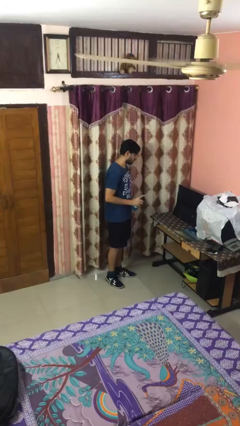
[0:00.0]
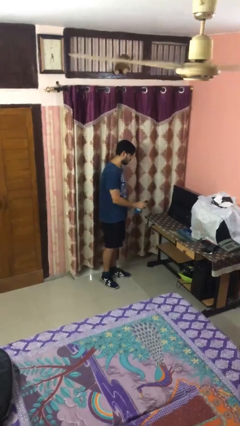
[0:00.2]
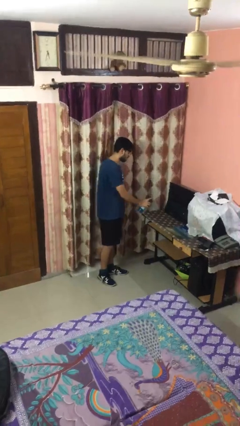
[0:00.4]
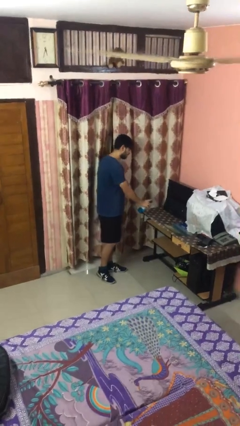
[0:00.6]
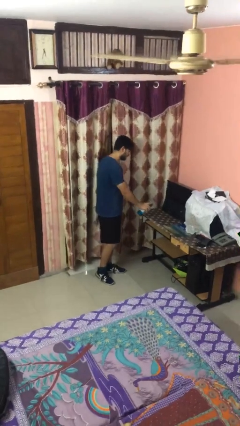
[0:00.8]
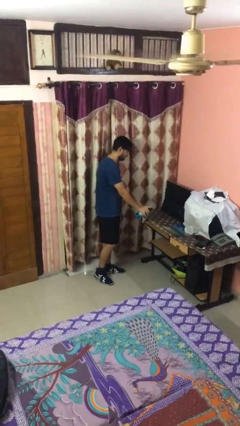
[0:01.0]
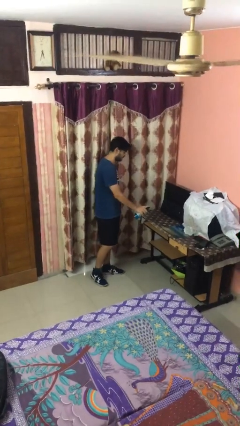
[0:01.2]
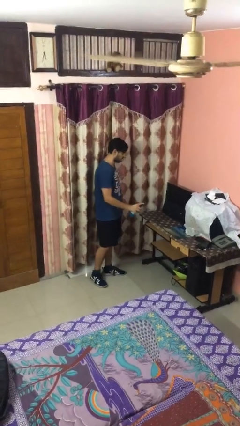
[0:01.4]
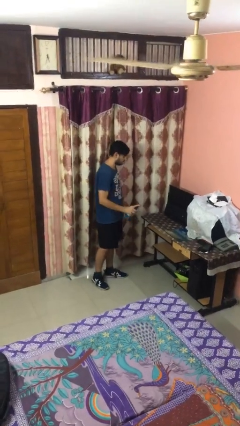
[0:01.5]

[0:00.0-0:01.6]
person sprays from bottle

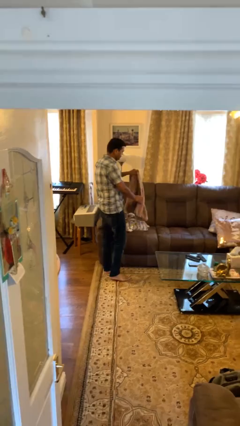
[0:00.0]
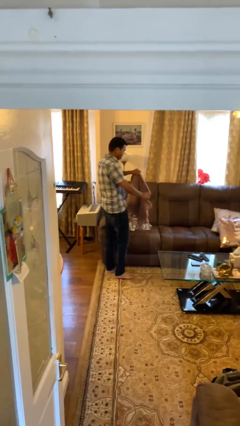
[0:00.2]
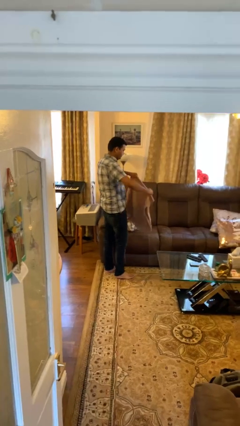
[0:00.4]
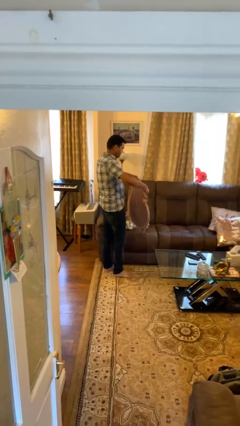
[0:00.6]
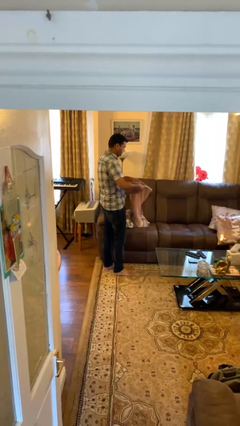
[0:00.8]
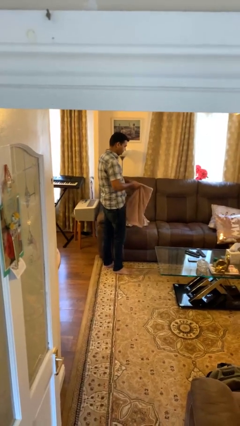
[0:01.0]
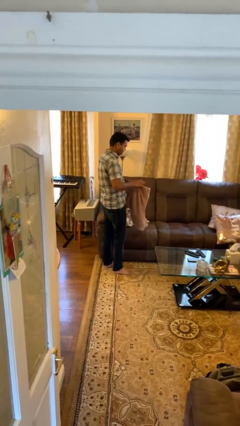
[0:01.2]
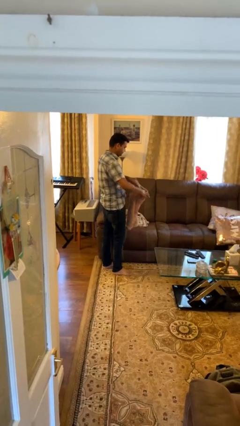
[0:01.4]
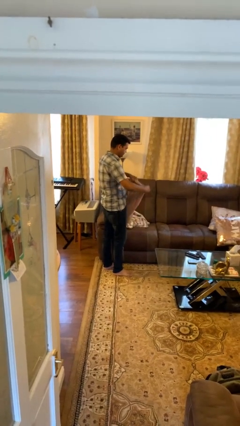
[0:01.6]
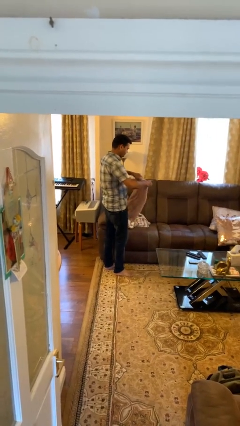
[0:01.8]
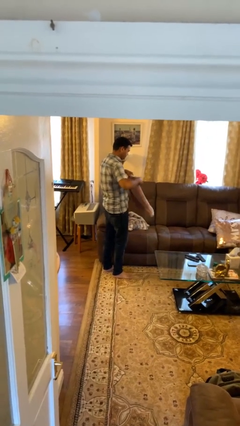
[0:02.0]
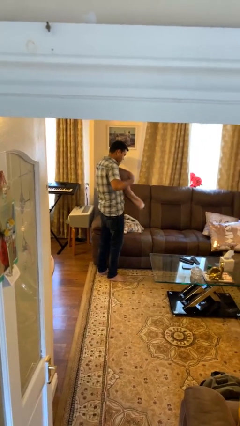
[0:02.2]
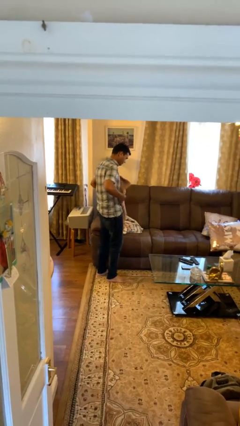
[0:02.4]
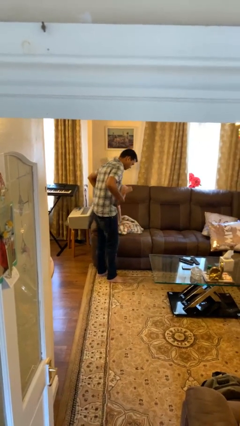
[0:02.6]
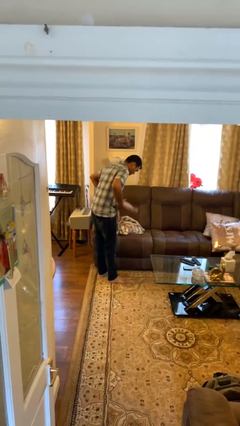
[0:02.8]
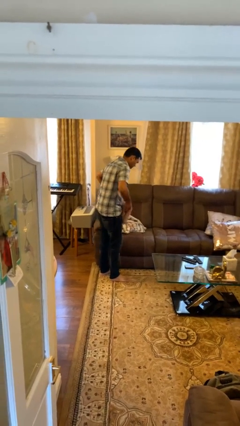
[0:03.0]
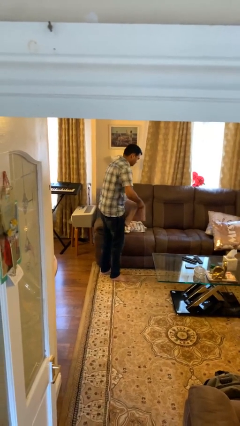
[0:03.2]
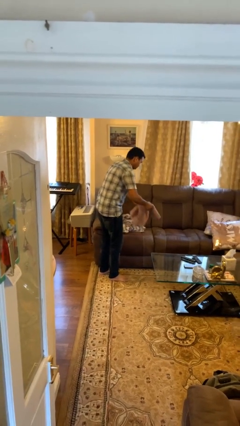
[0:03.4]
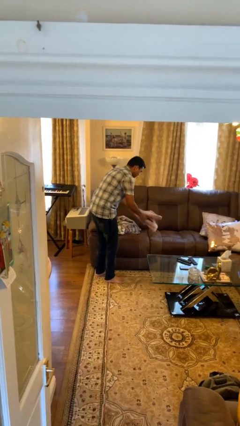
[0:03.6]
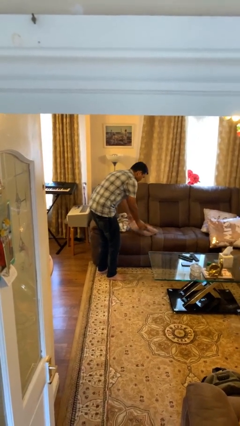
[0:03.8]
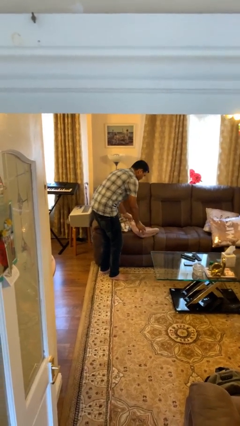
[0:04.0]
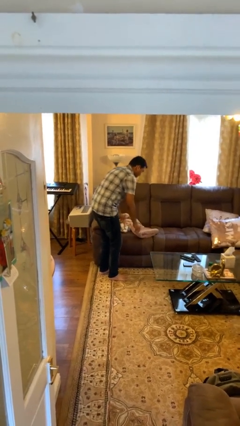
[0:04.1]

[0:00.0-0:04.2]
person folds towel

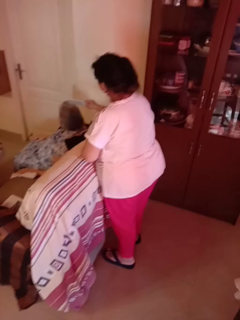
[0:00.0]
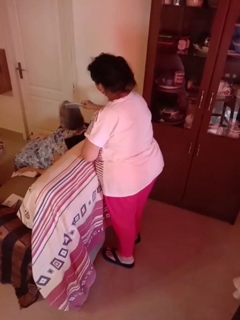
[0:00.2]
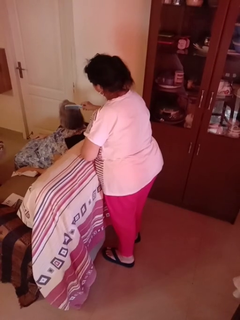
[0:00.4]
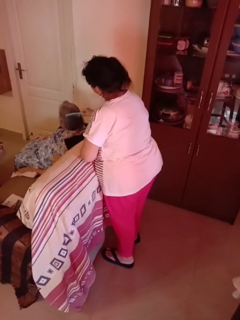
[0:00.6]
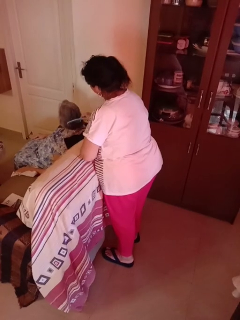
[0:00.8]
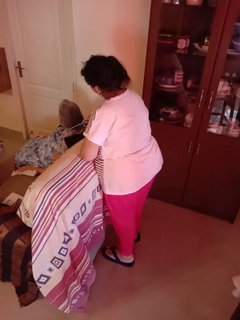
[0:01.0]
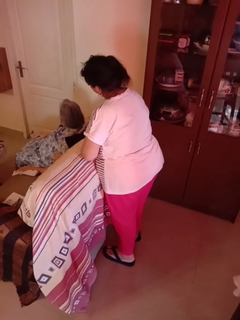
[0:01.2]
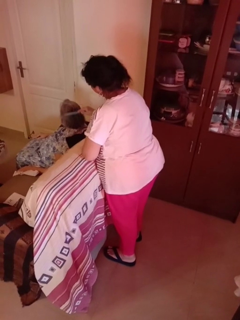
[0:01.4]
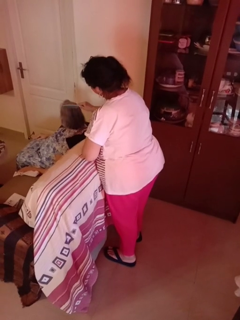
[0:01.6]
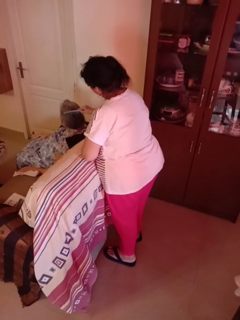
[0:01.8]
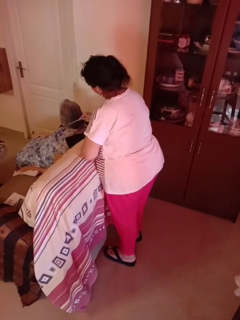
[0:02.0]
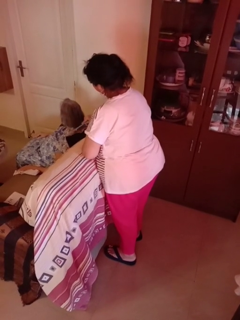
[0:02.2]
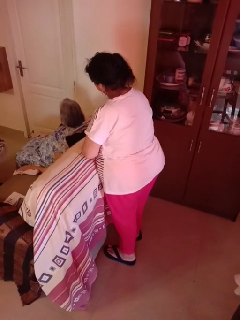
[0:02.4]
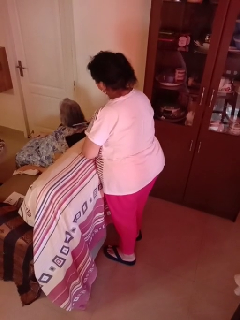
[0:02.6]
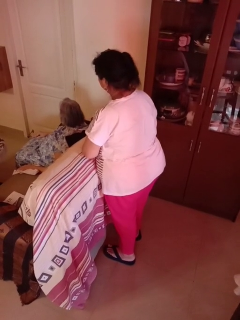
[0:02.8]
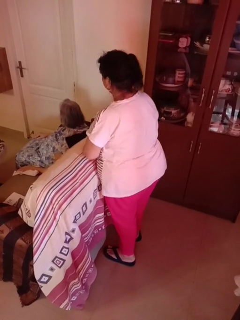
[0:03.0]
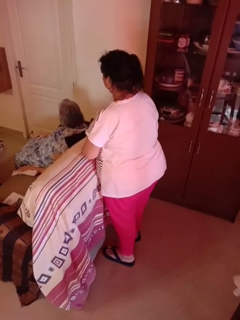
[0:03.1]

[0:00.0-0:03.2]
person brushes hair of person

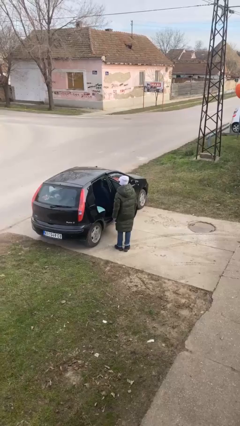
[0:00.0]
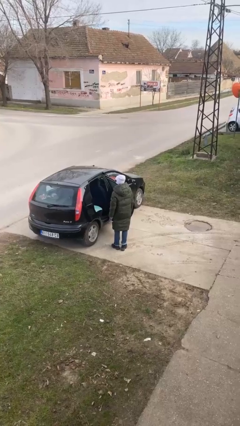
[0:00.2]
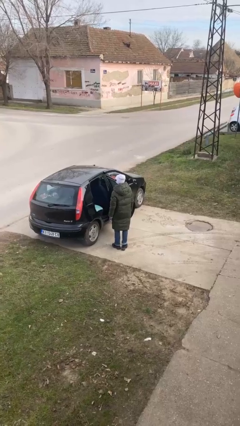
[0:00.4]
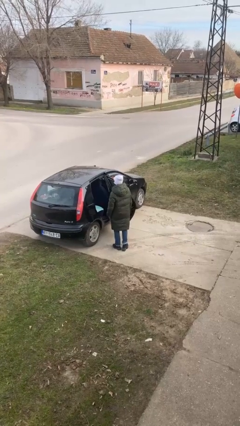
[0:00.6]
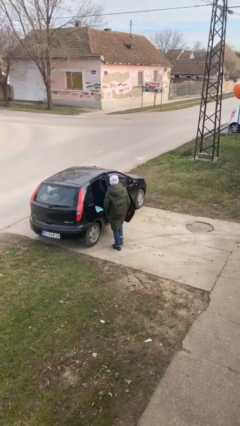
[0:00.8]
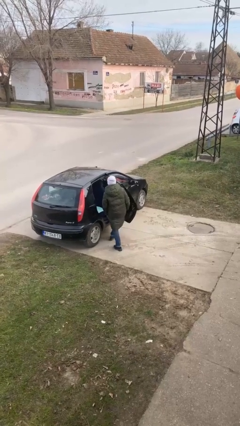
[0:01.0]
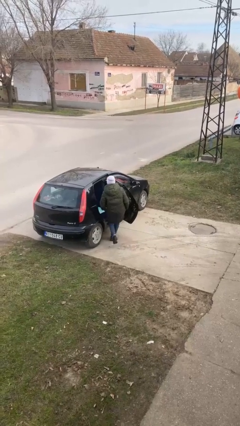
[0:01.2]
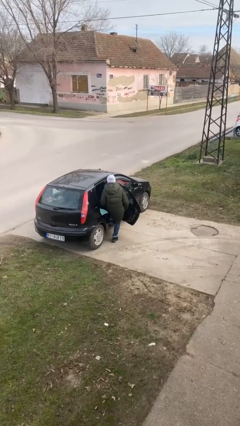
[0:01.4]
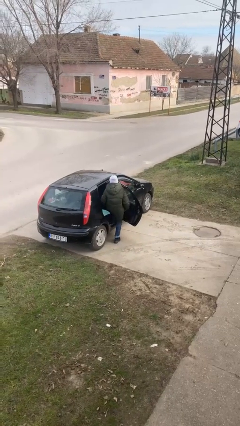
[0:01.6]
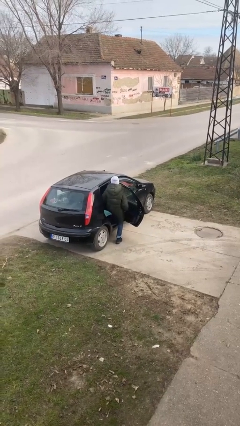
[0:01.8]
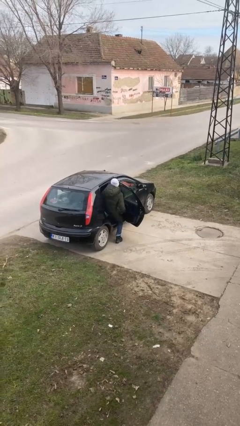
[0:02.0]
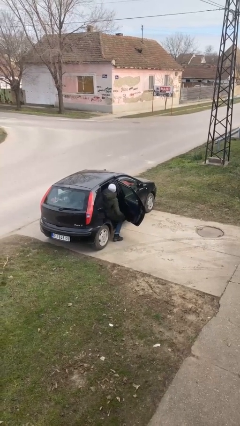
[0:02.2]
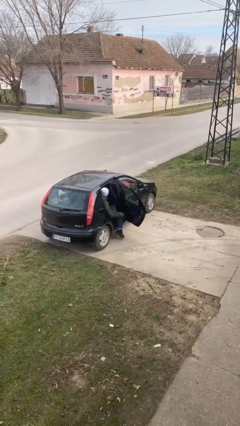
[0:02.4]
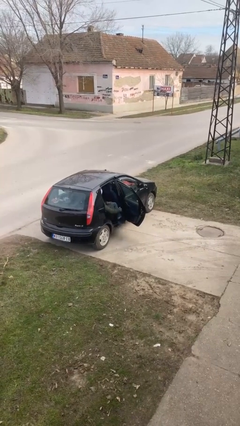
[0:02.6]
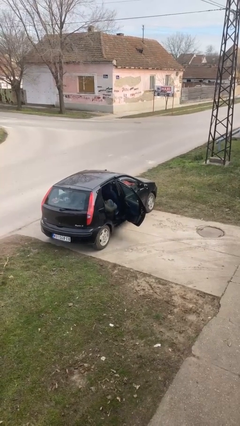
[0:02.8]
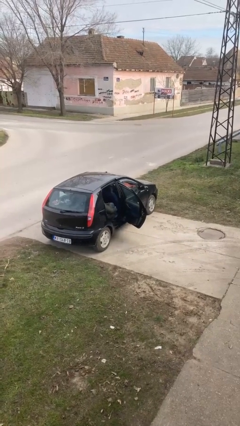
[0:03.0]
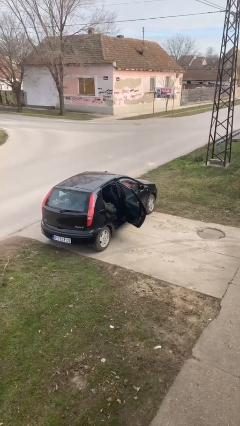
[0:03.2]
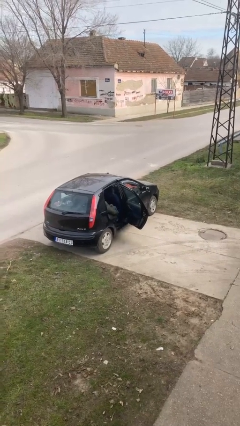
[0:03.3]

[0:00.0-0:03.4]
person enters car

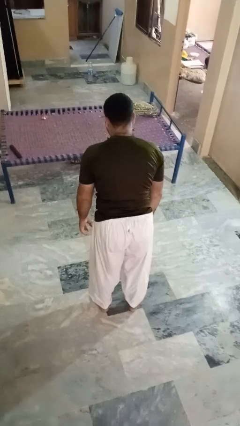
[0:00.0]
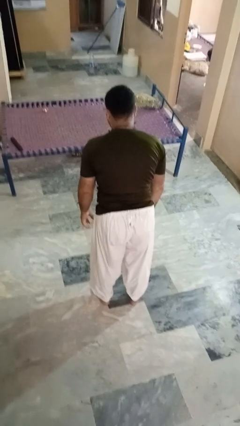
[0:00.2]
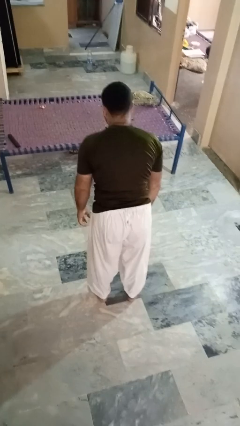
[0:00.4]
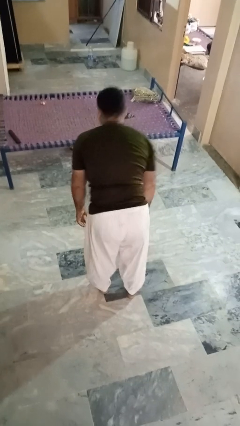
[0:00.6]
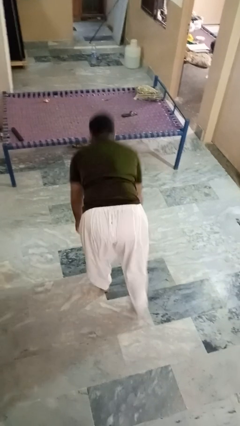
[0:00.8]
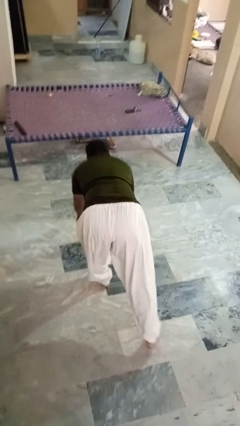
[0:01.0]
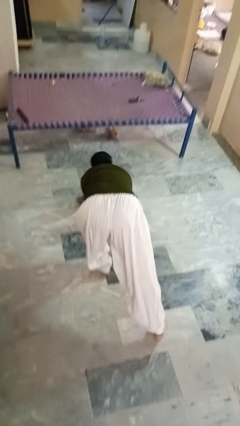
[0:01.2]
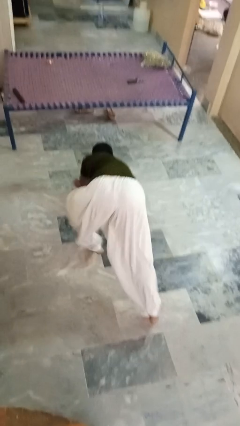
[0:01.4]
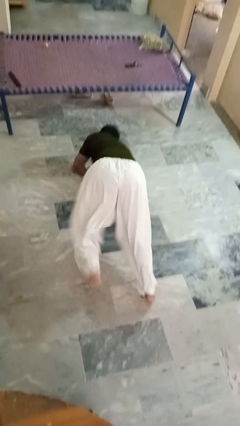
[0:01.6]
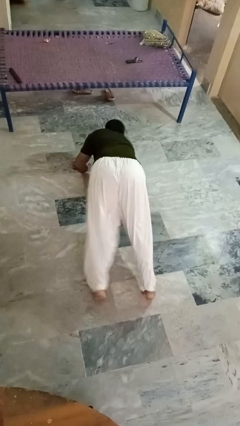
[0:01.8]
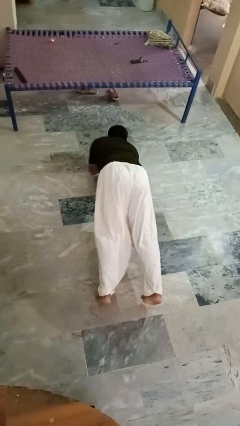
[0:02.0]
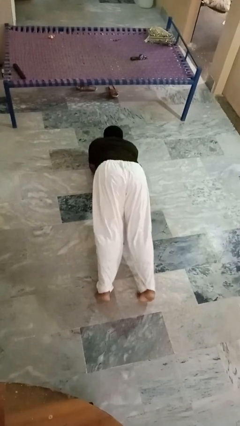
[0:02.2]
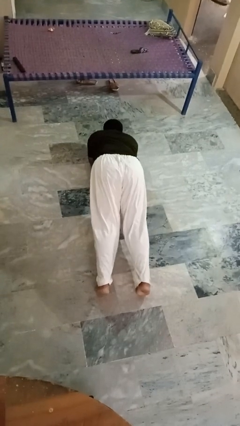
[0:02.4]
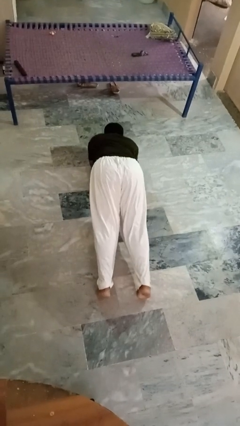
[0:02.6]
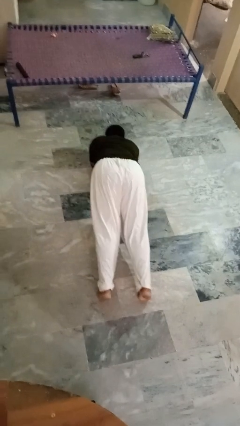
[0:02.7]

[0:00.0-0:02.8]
person exercises with plank

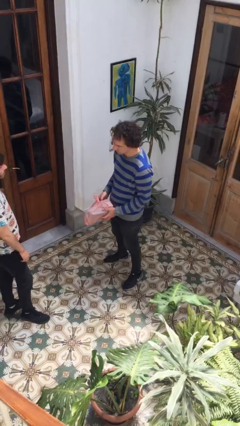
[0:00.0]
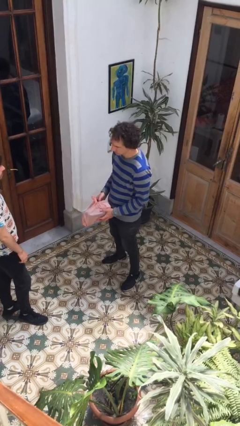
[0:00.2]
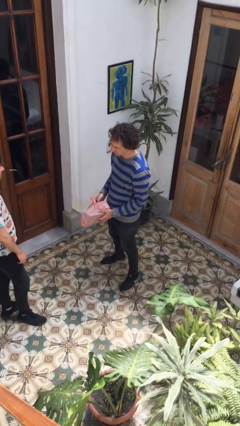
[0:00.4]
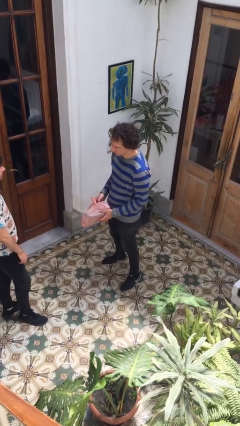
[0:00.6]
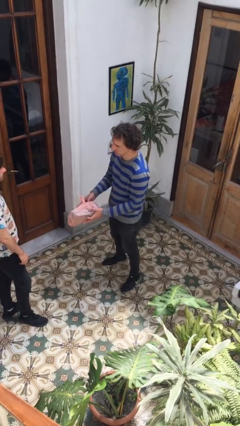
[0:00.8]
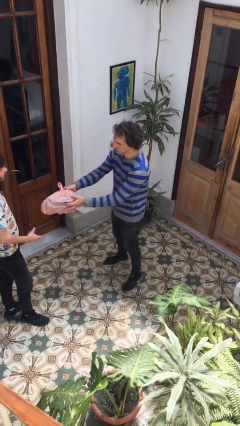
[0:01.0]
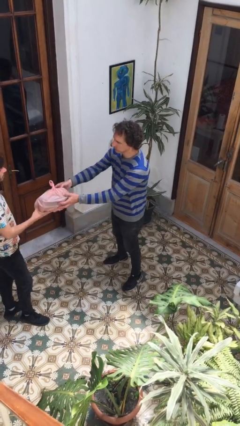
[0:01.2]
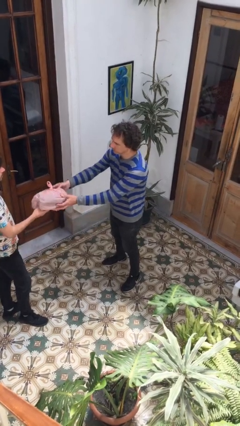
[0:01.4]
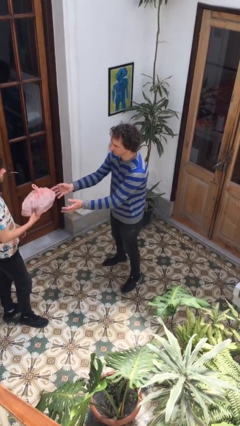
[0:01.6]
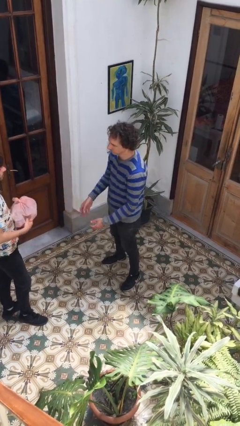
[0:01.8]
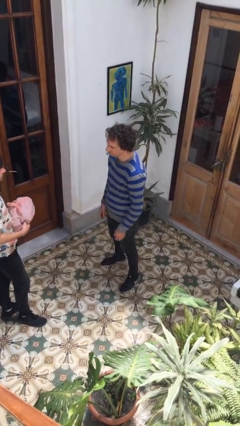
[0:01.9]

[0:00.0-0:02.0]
person transfers object to person

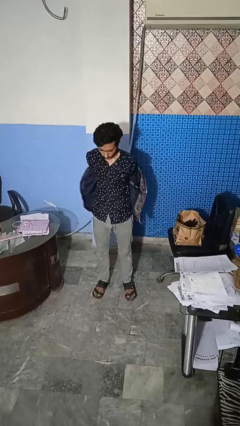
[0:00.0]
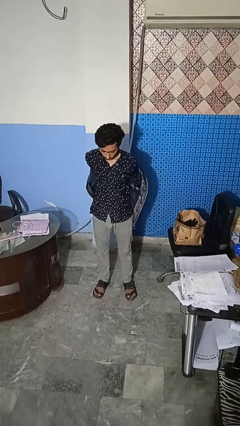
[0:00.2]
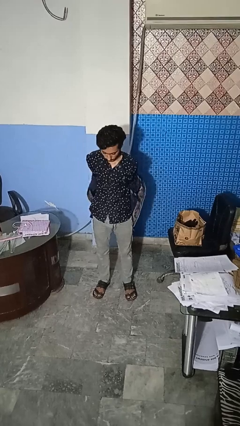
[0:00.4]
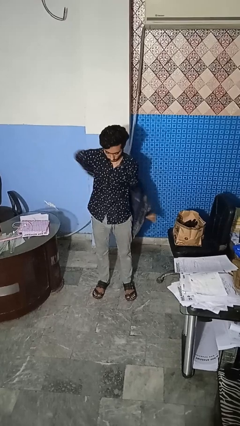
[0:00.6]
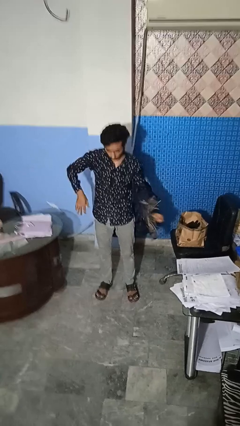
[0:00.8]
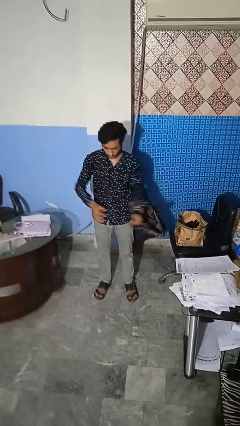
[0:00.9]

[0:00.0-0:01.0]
person takes off jacket
